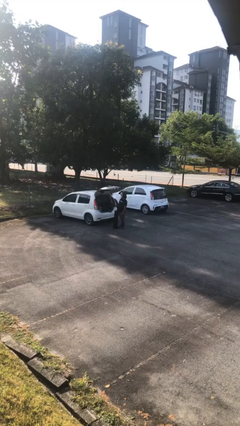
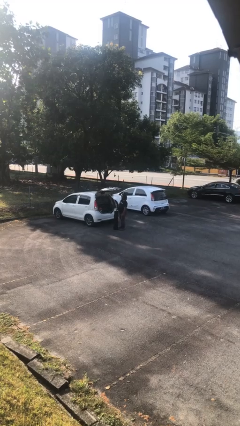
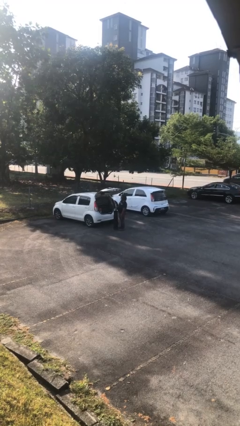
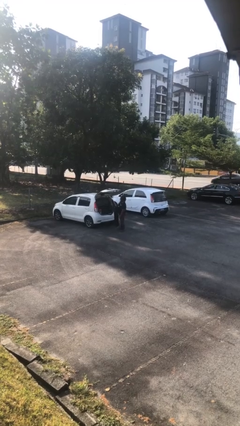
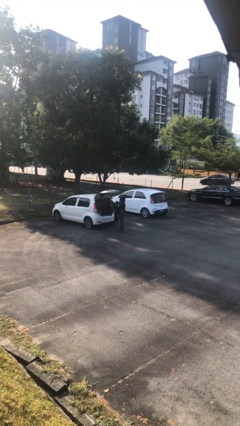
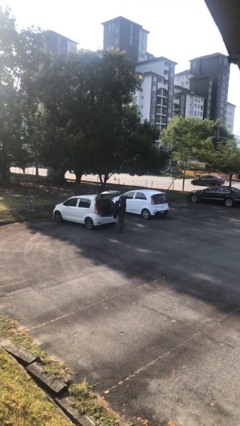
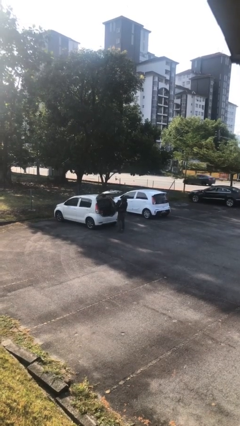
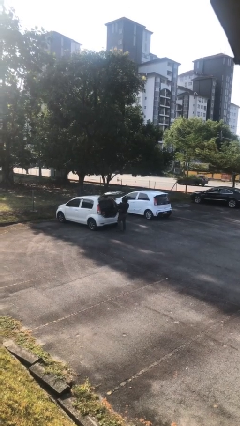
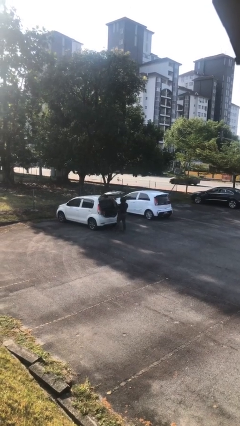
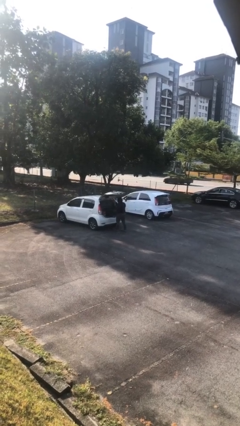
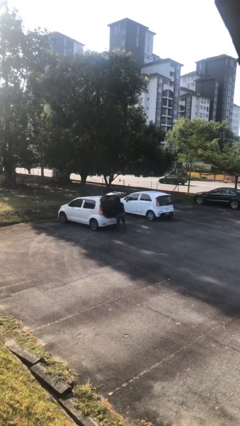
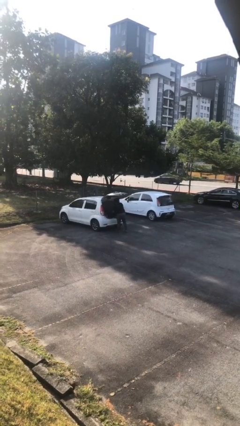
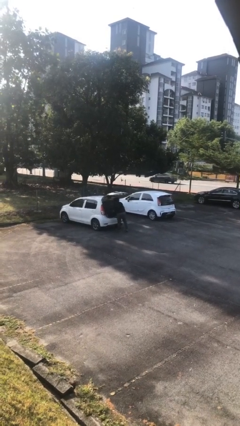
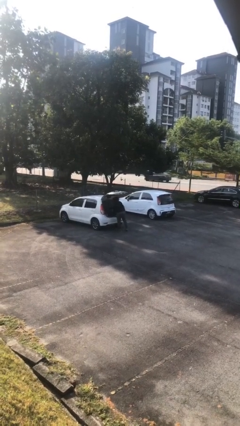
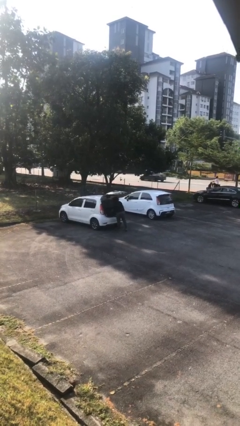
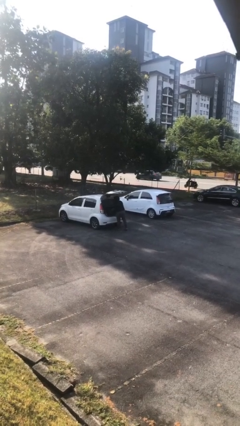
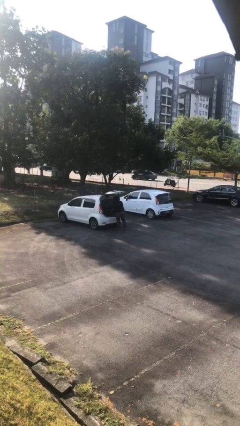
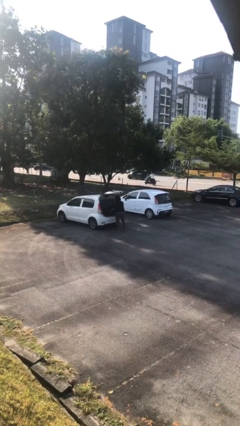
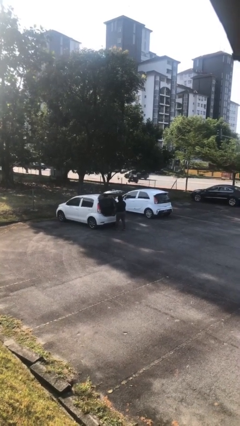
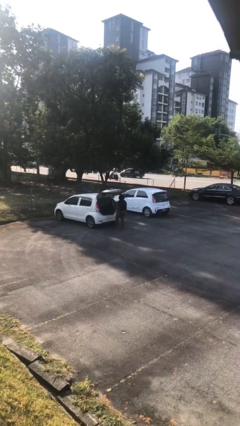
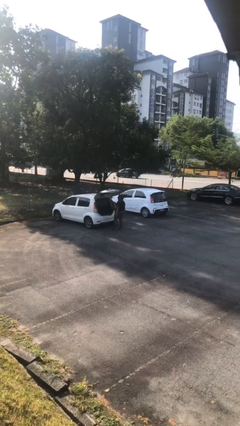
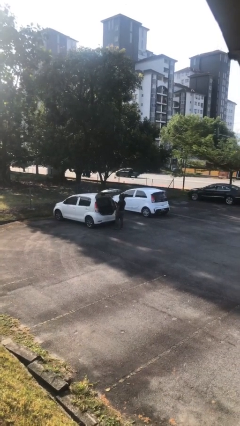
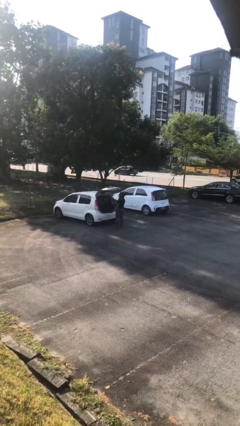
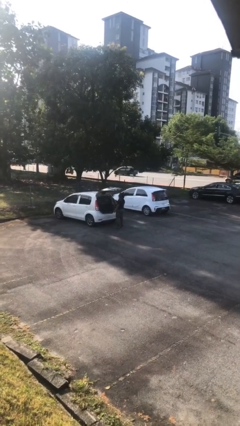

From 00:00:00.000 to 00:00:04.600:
person loads car

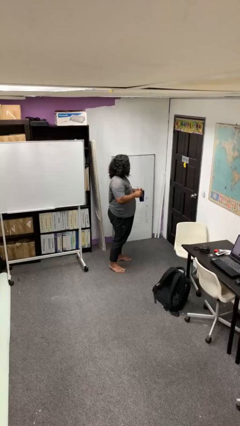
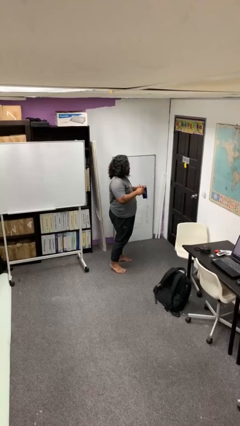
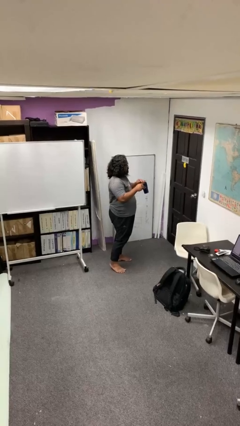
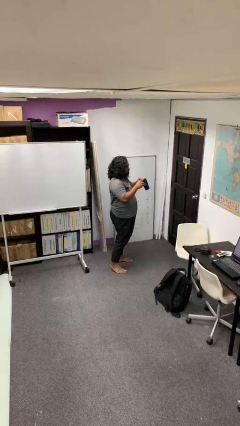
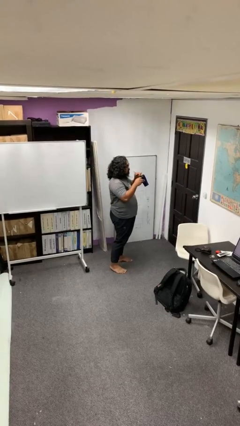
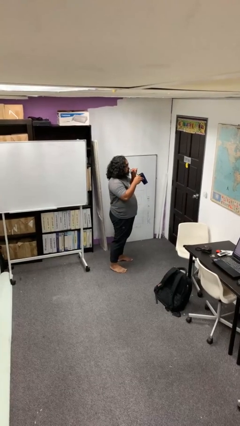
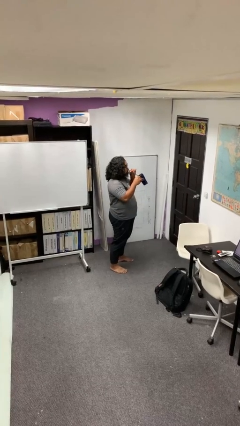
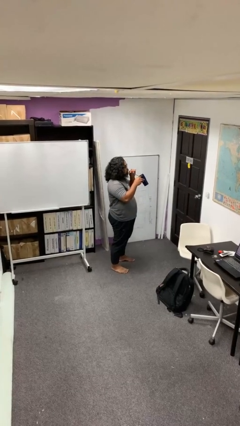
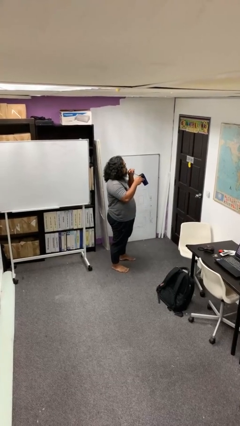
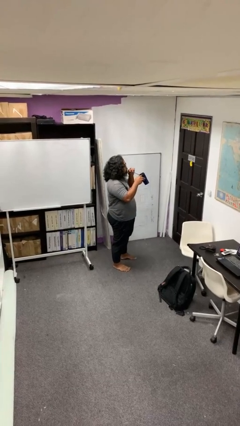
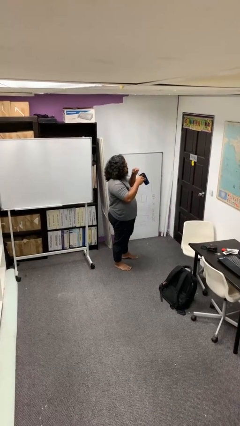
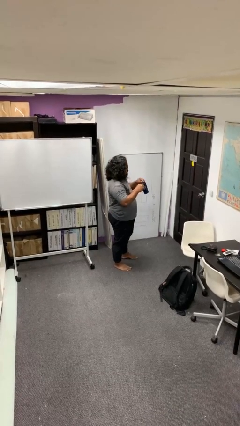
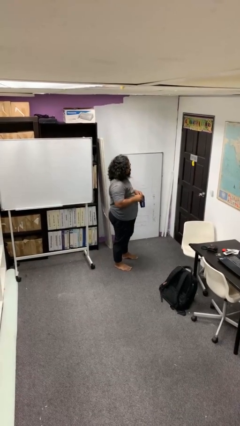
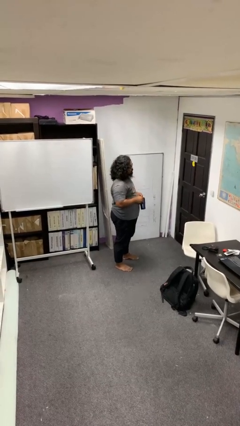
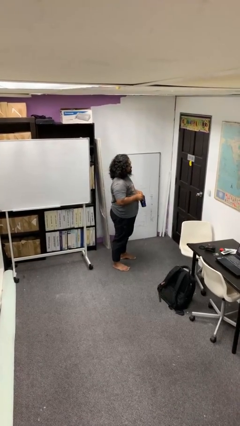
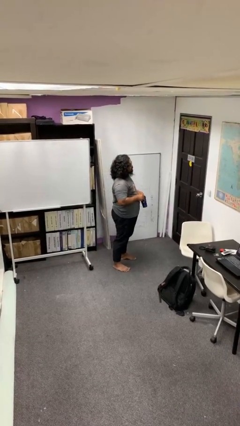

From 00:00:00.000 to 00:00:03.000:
person drinks from straw

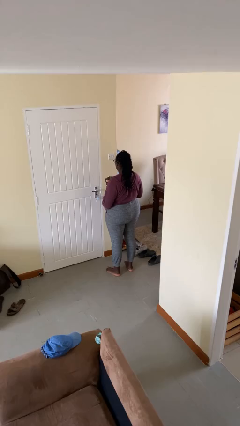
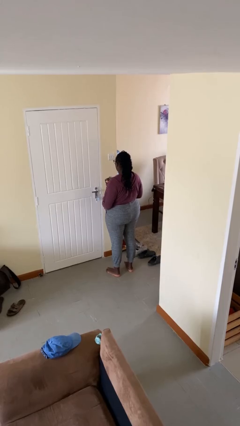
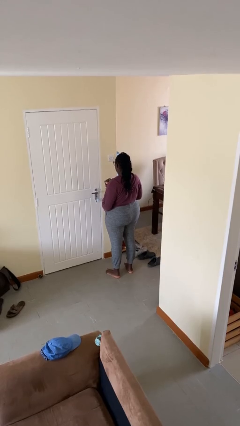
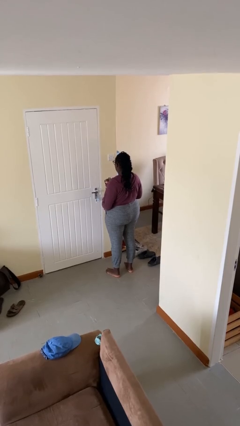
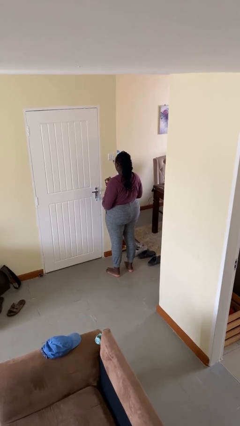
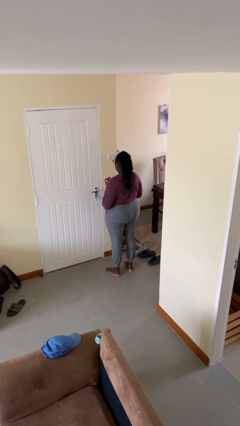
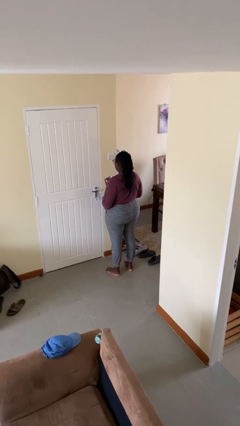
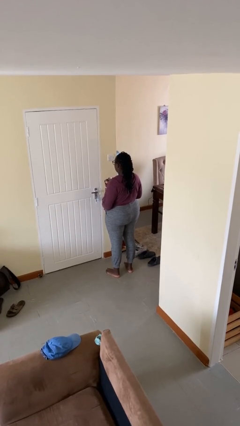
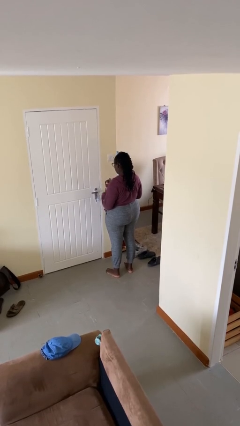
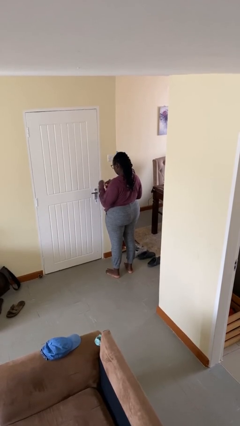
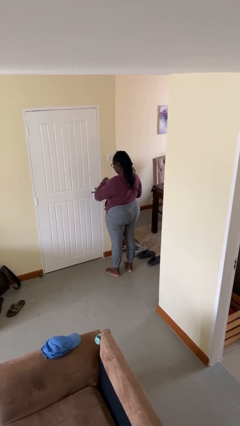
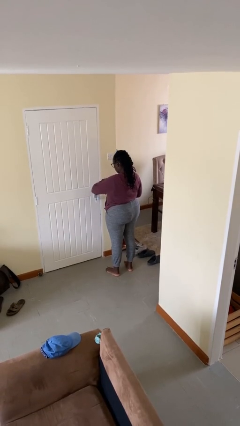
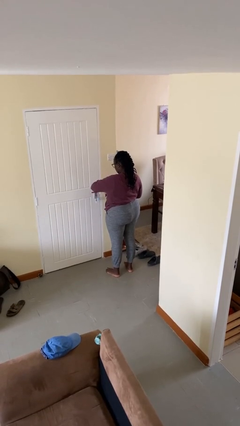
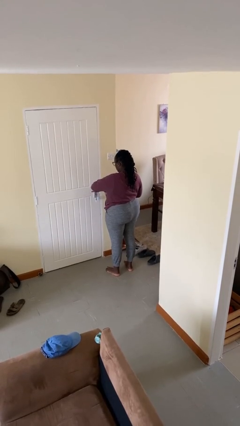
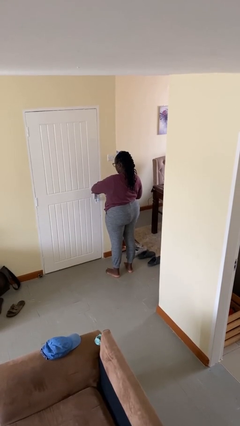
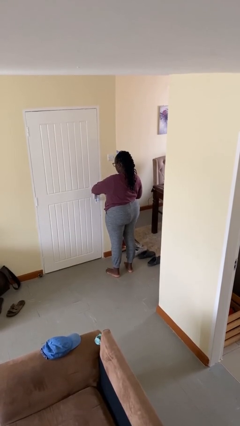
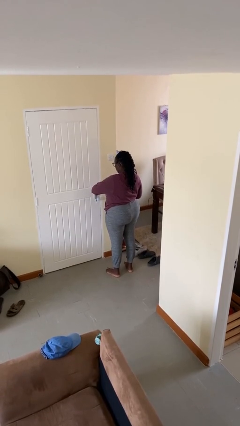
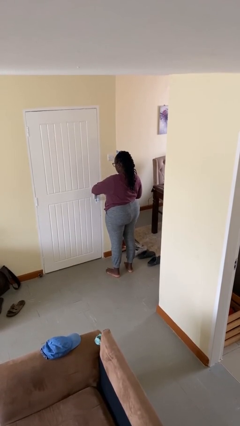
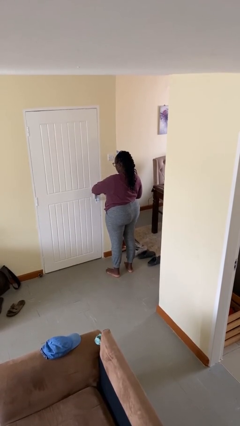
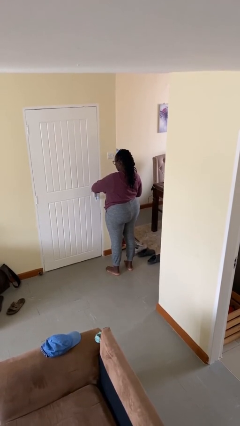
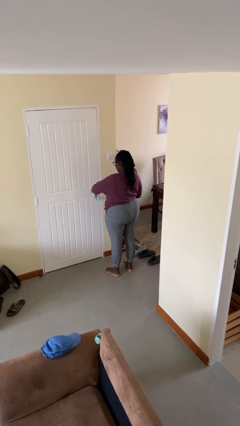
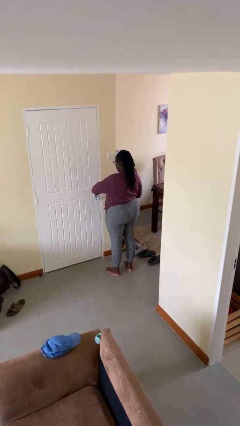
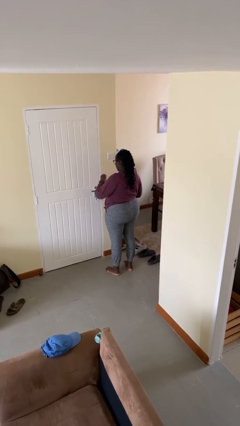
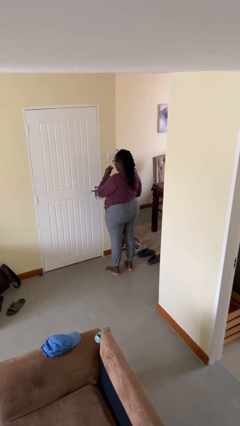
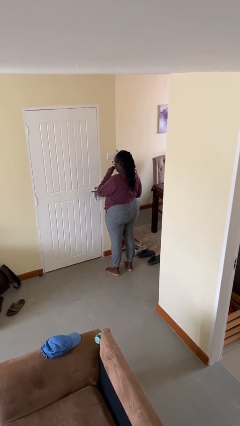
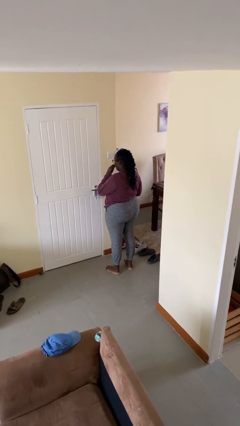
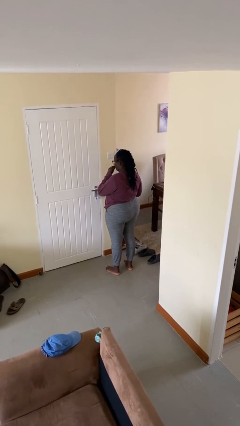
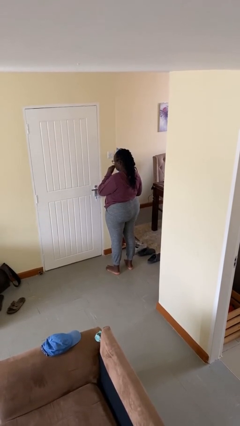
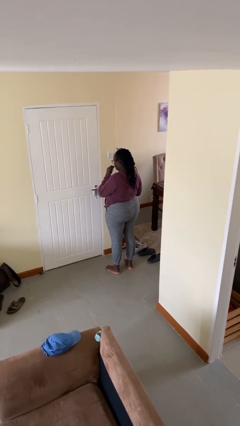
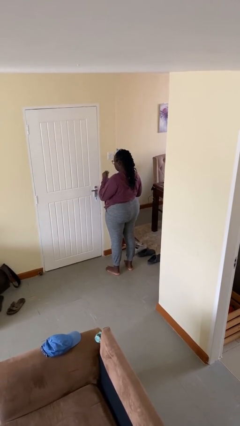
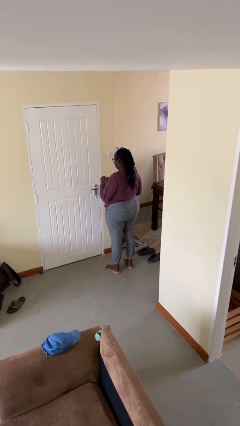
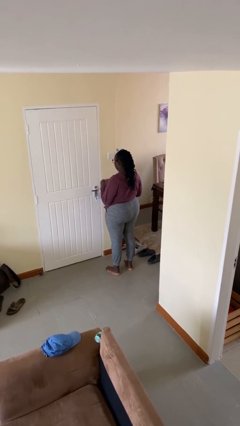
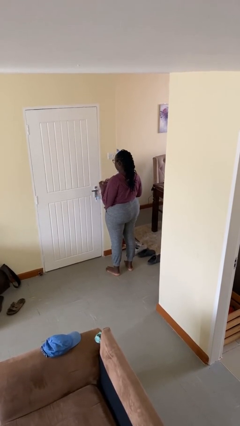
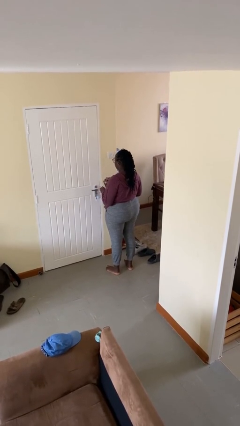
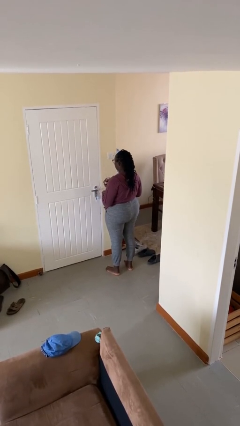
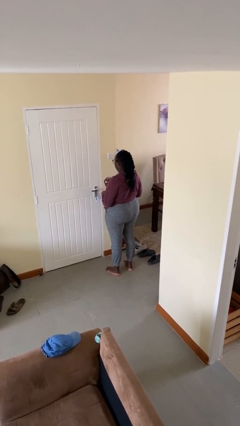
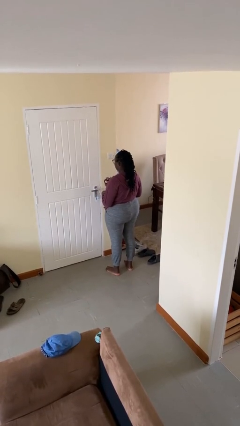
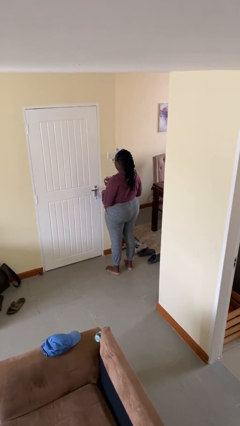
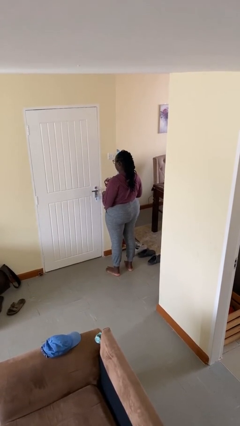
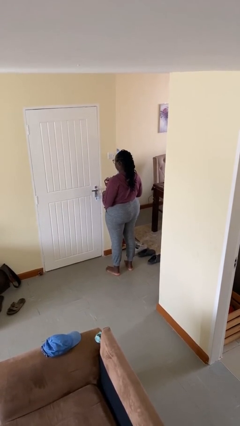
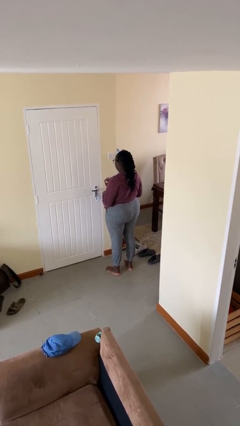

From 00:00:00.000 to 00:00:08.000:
person eats snack from bag

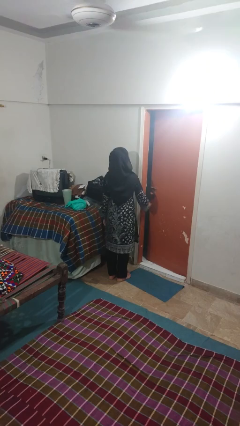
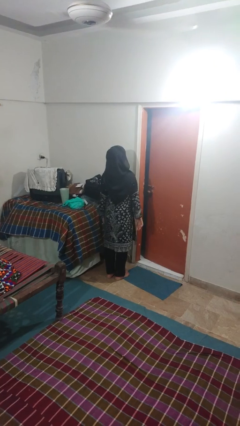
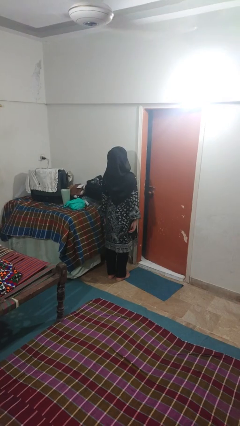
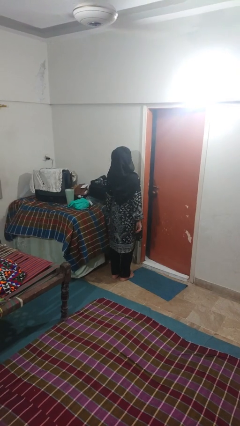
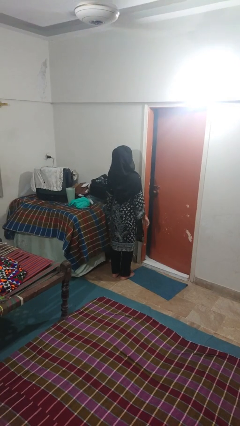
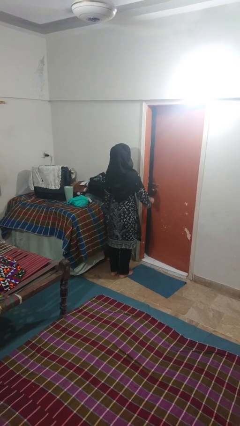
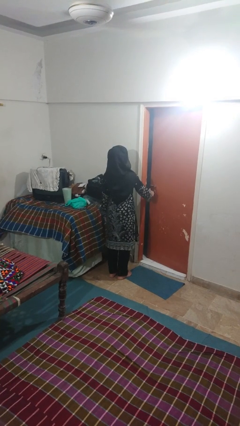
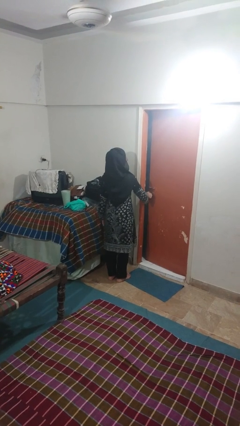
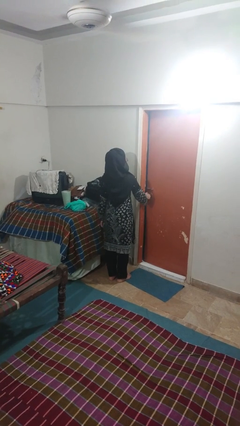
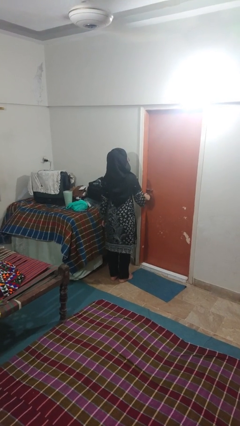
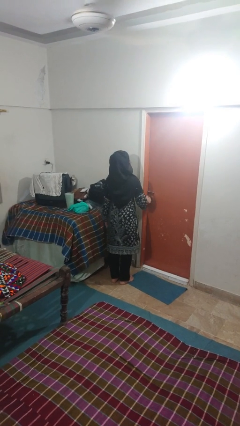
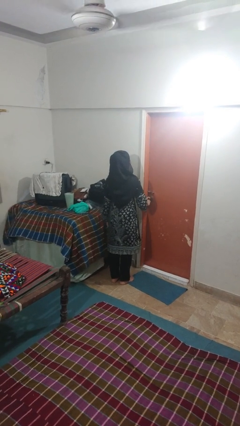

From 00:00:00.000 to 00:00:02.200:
person closes facility door
